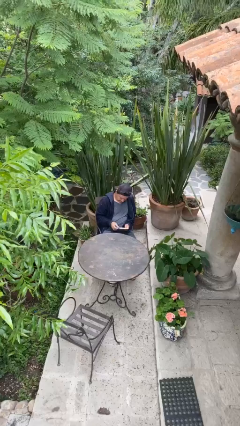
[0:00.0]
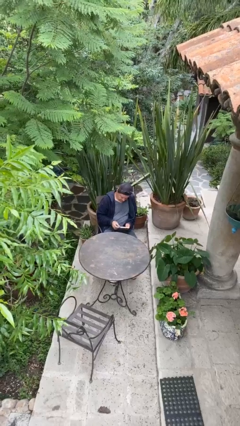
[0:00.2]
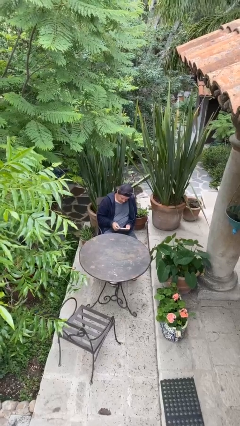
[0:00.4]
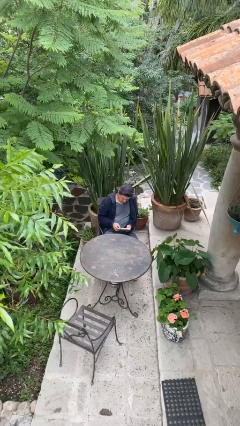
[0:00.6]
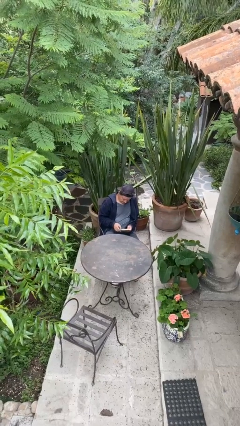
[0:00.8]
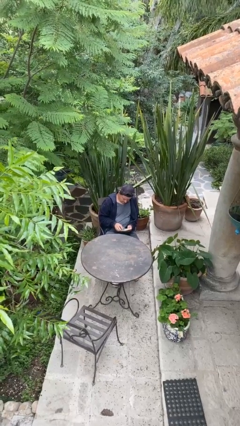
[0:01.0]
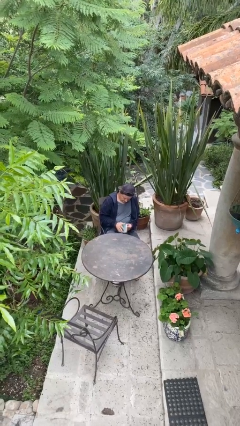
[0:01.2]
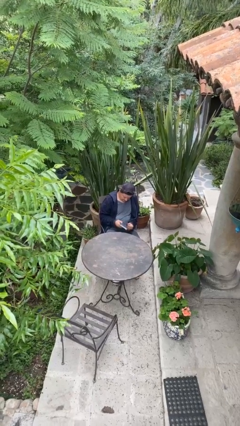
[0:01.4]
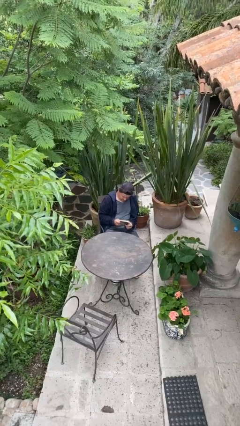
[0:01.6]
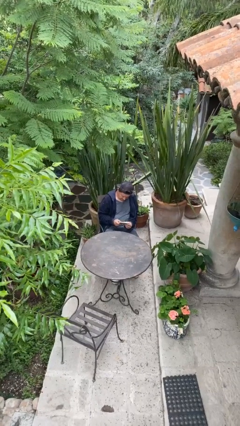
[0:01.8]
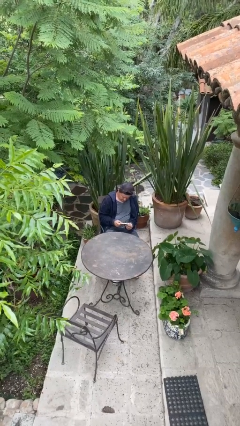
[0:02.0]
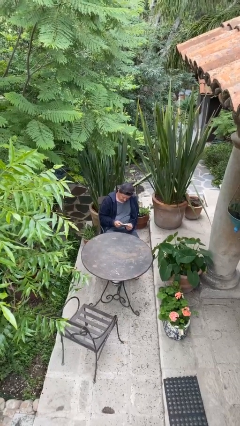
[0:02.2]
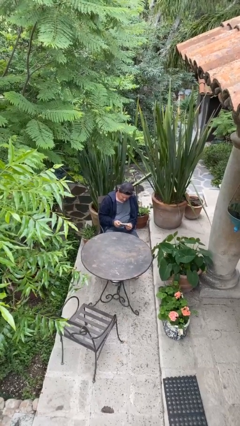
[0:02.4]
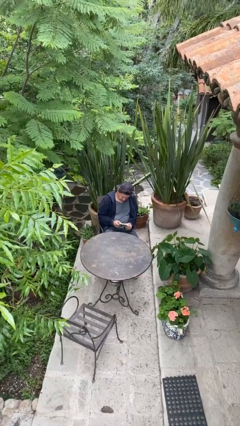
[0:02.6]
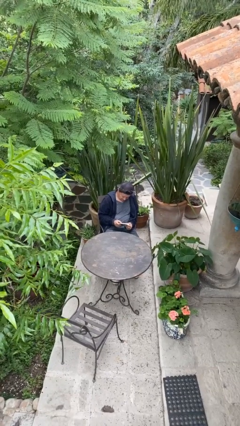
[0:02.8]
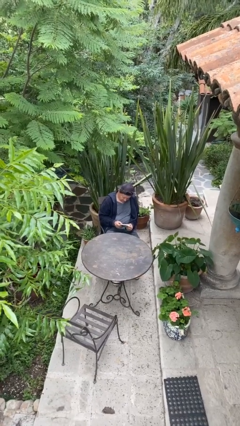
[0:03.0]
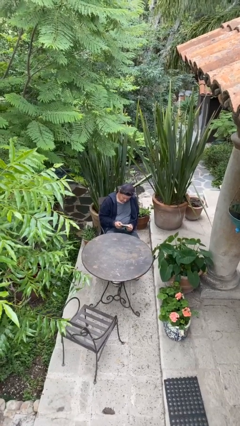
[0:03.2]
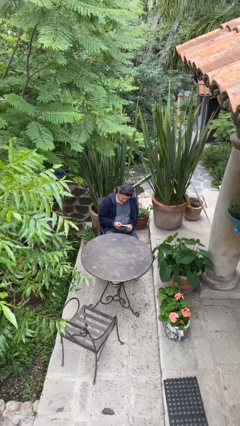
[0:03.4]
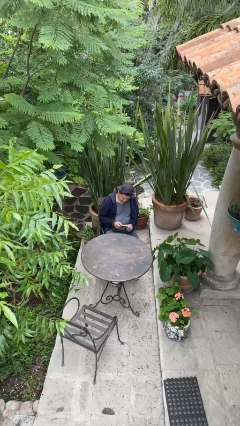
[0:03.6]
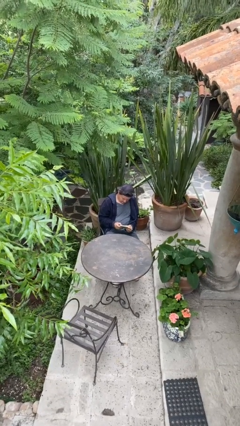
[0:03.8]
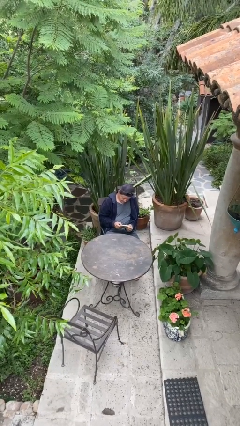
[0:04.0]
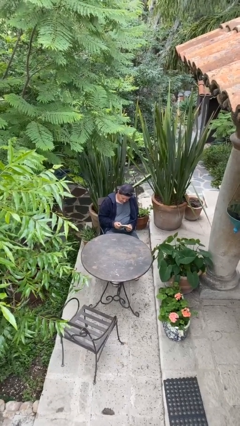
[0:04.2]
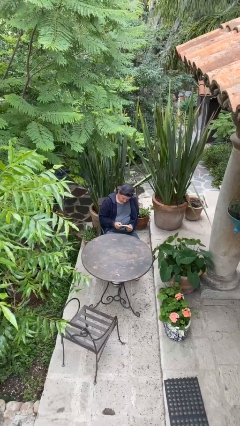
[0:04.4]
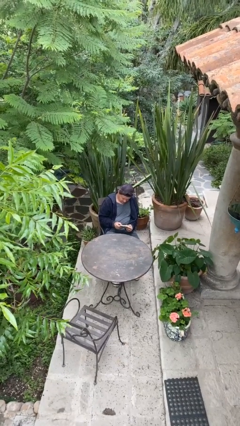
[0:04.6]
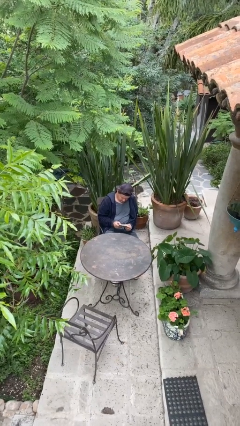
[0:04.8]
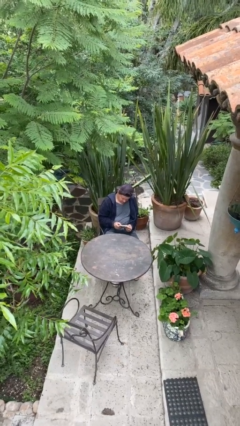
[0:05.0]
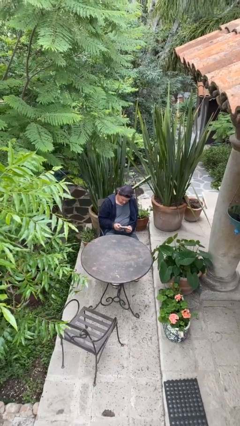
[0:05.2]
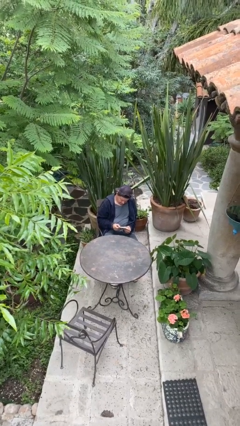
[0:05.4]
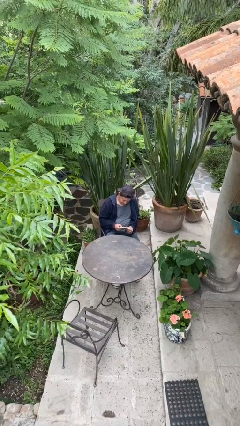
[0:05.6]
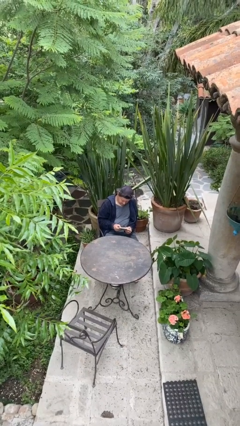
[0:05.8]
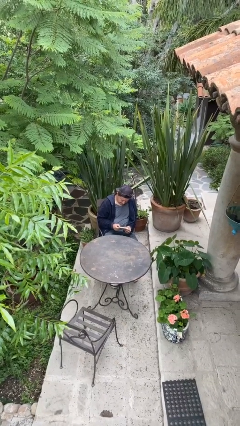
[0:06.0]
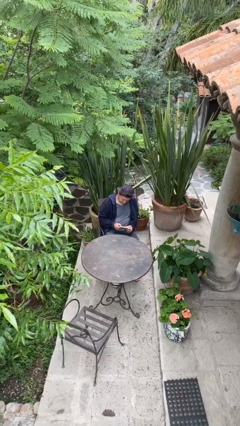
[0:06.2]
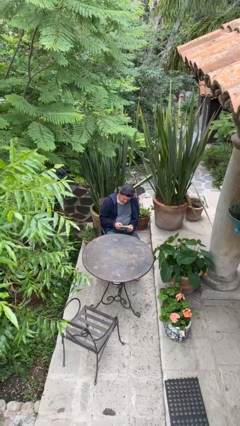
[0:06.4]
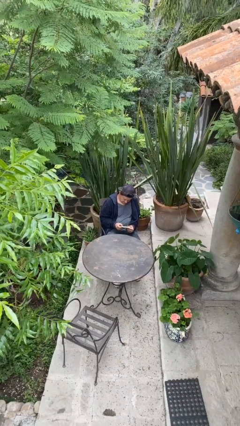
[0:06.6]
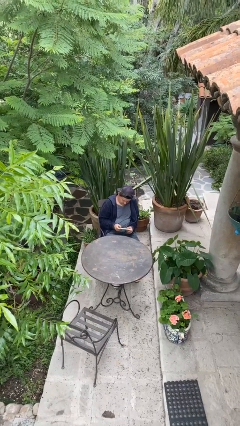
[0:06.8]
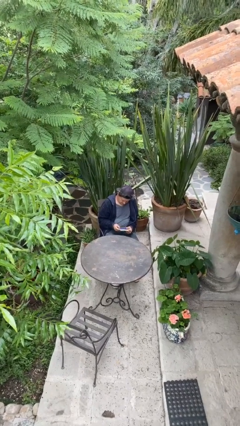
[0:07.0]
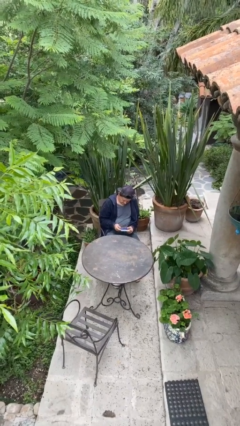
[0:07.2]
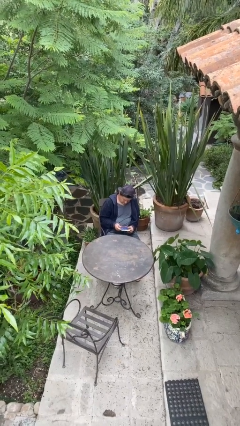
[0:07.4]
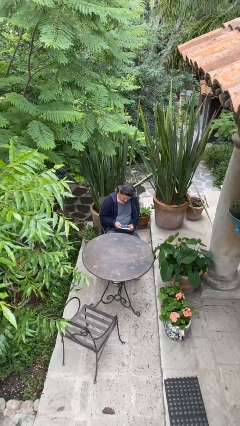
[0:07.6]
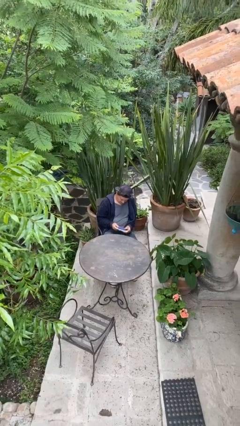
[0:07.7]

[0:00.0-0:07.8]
person reads document

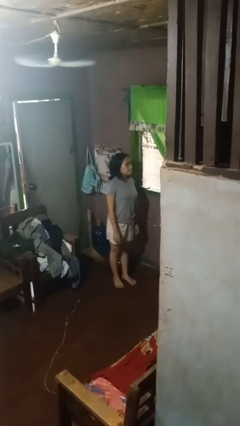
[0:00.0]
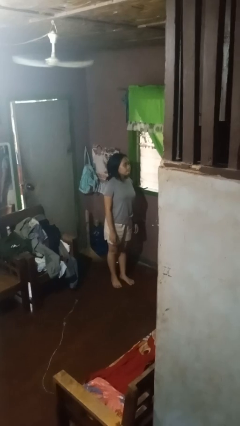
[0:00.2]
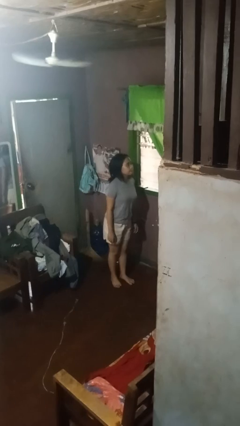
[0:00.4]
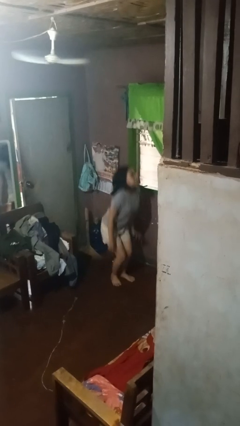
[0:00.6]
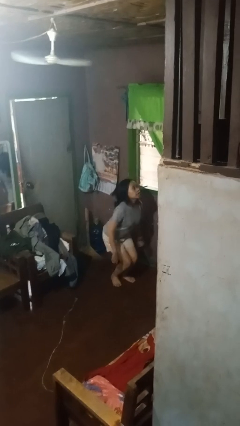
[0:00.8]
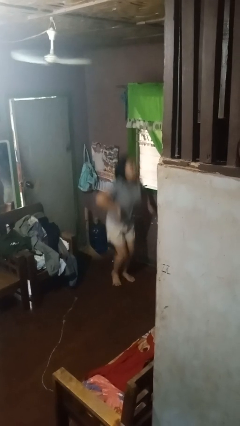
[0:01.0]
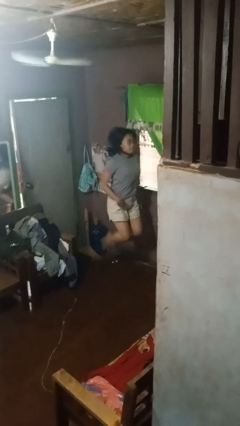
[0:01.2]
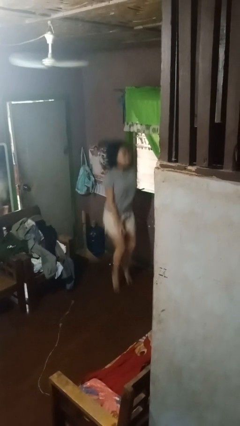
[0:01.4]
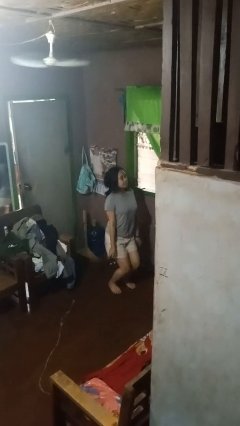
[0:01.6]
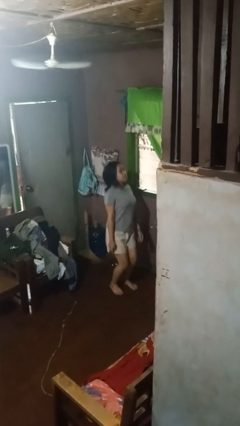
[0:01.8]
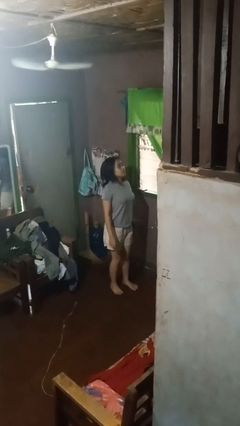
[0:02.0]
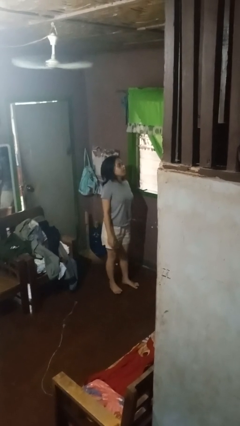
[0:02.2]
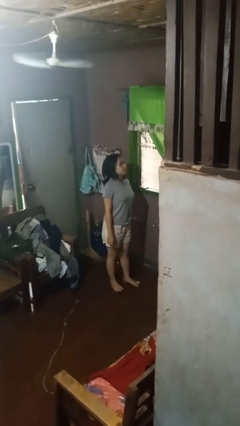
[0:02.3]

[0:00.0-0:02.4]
person jumps

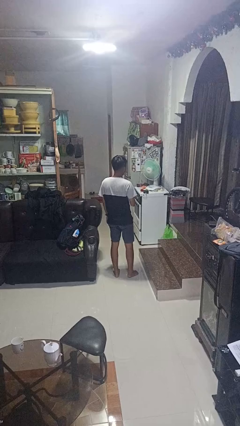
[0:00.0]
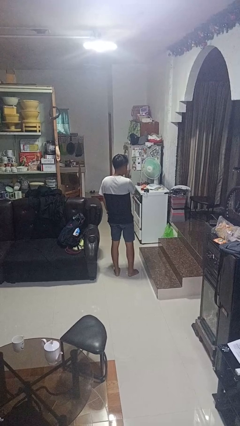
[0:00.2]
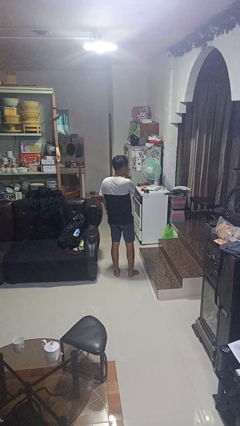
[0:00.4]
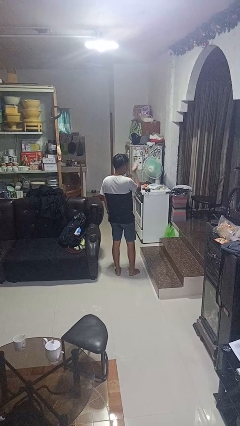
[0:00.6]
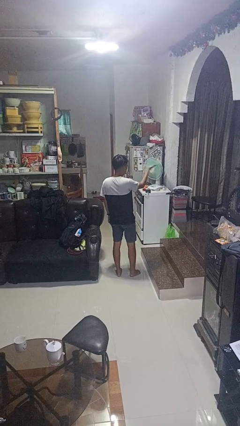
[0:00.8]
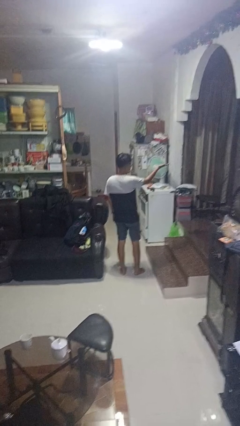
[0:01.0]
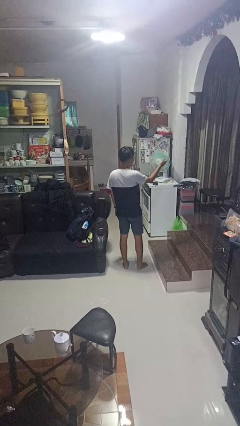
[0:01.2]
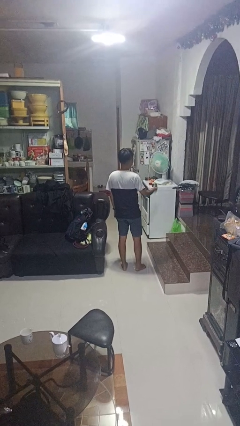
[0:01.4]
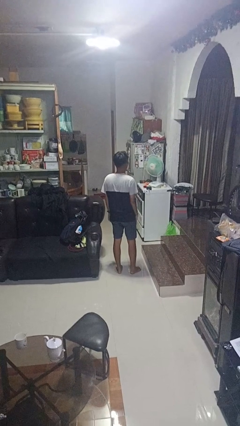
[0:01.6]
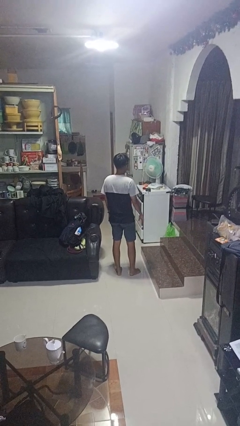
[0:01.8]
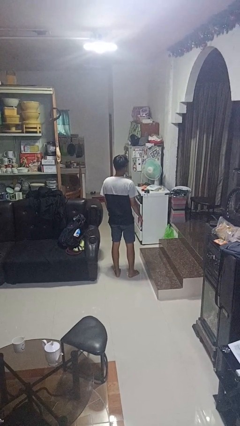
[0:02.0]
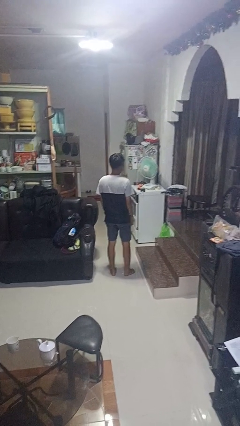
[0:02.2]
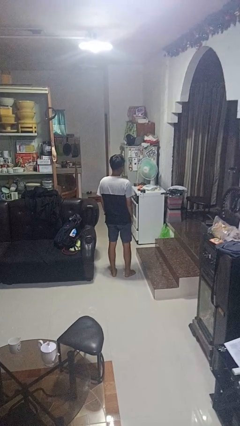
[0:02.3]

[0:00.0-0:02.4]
person gestures blow kiss

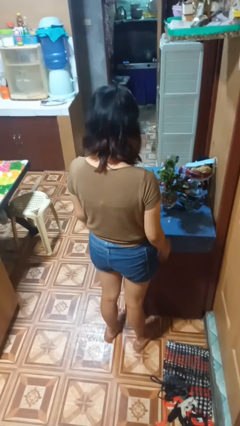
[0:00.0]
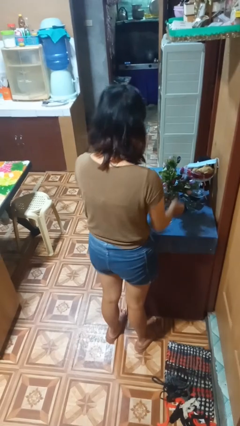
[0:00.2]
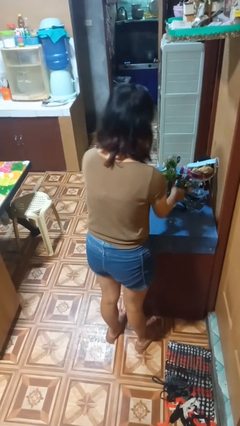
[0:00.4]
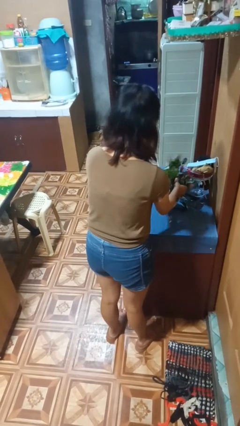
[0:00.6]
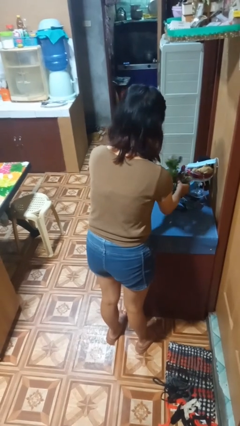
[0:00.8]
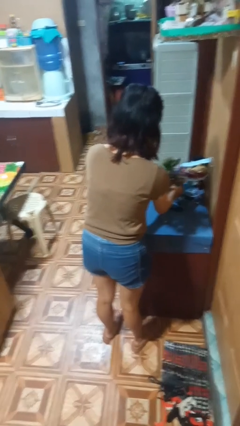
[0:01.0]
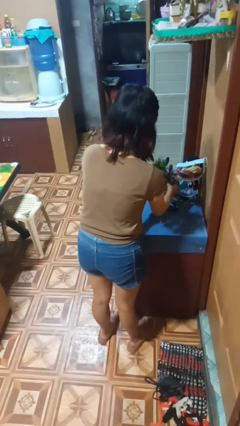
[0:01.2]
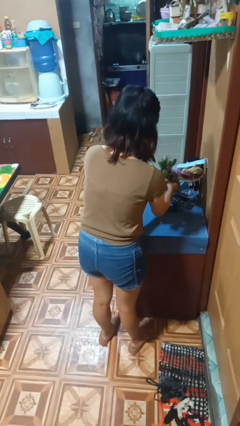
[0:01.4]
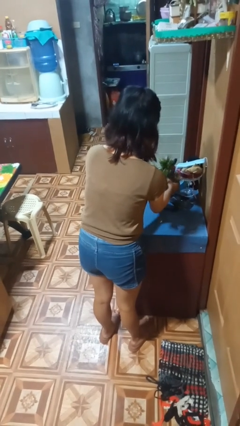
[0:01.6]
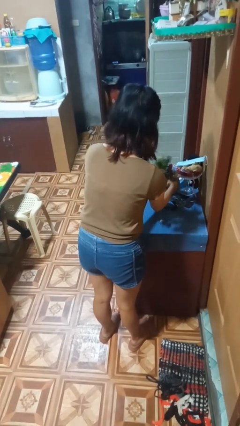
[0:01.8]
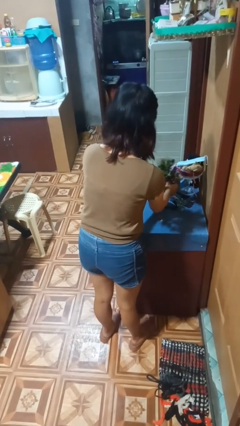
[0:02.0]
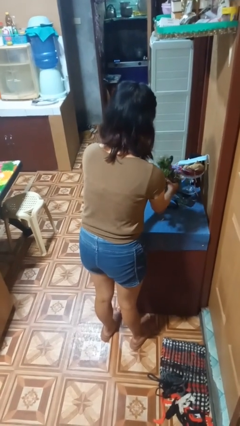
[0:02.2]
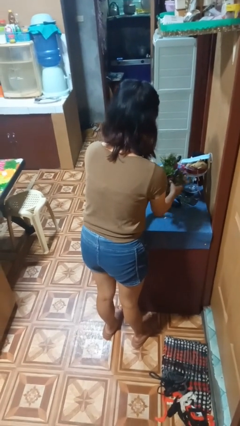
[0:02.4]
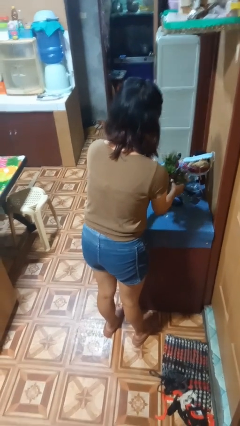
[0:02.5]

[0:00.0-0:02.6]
person arranges flowers in vase

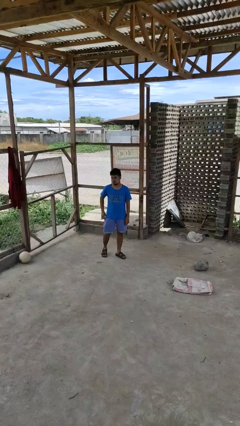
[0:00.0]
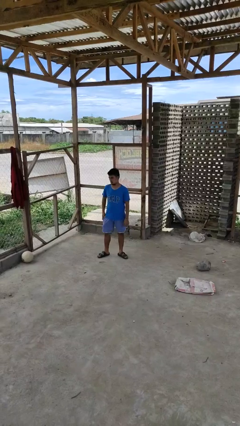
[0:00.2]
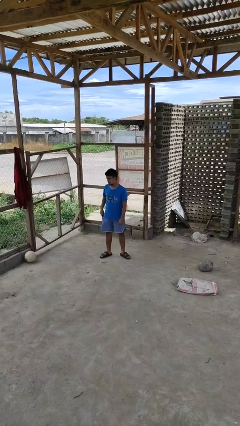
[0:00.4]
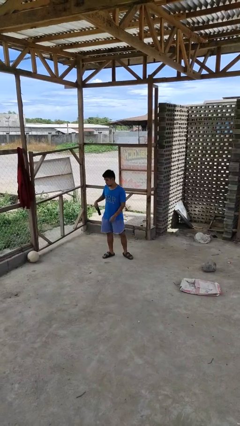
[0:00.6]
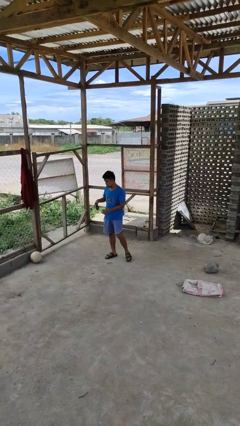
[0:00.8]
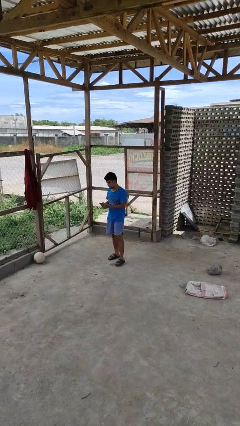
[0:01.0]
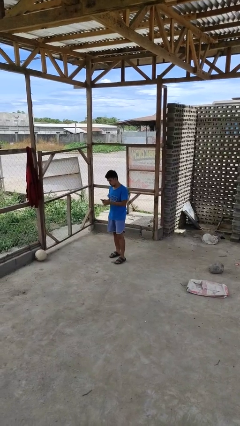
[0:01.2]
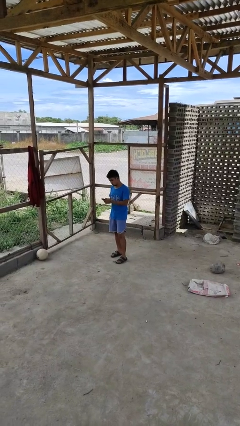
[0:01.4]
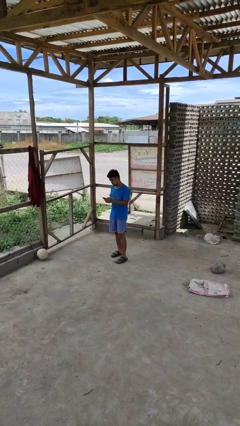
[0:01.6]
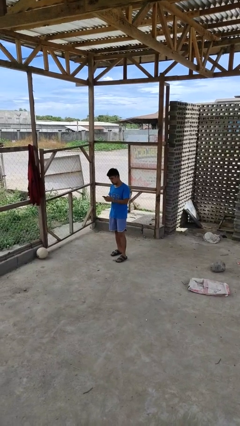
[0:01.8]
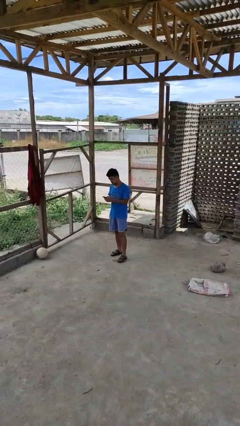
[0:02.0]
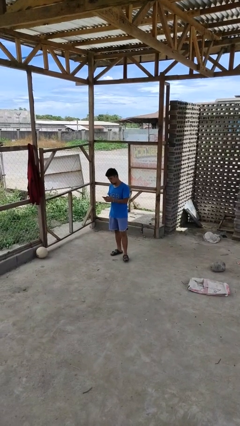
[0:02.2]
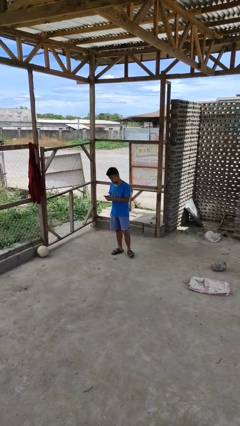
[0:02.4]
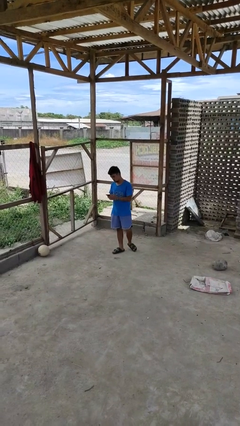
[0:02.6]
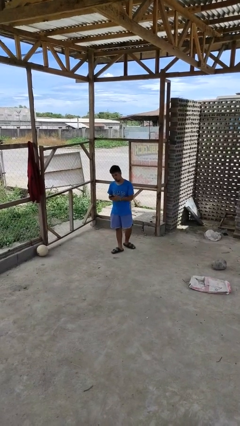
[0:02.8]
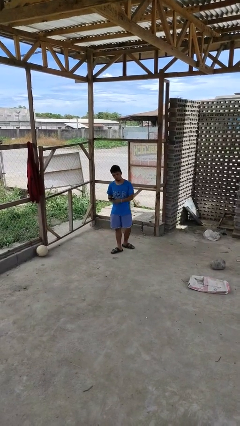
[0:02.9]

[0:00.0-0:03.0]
person takes phone from pocket
